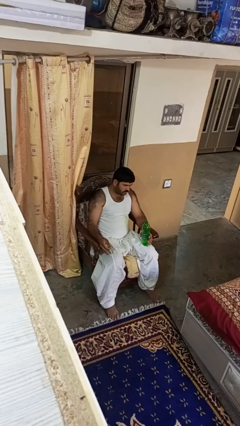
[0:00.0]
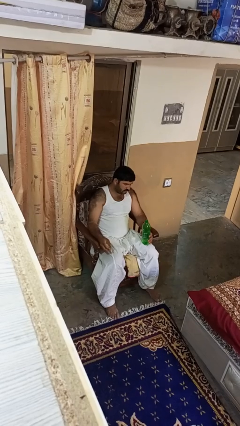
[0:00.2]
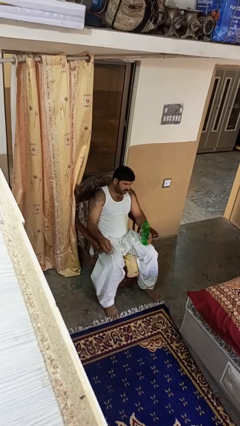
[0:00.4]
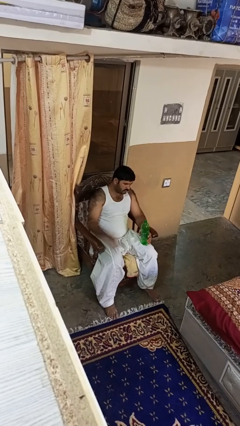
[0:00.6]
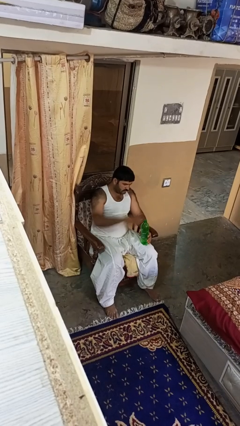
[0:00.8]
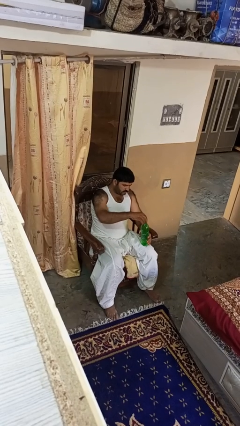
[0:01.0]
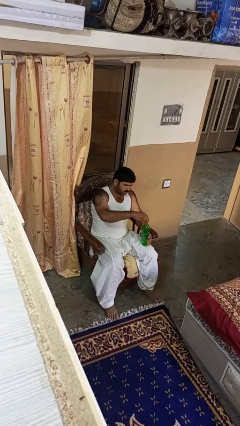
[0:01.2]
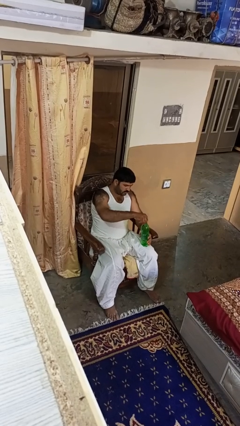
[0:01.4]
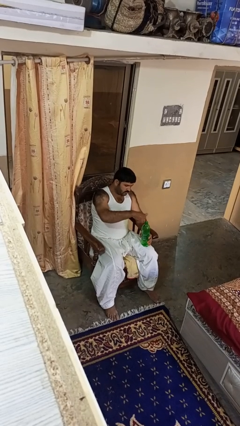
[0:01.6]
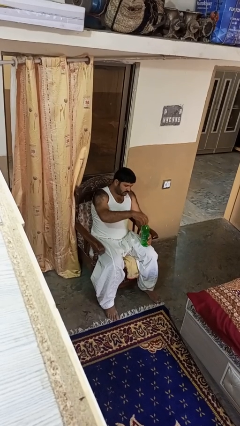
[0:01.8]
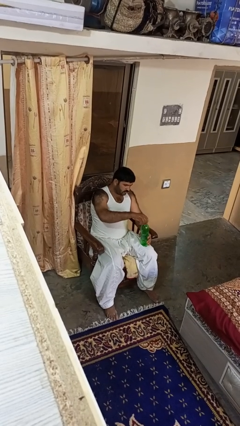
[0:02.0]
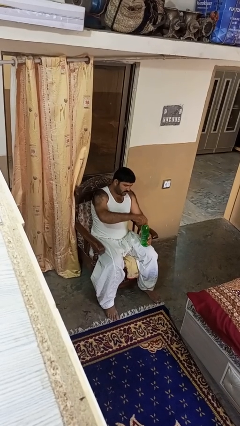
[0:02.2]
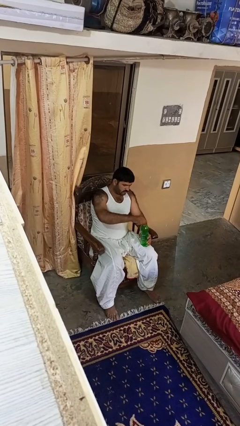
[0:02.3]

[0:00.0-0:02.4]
person screws lid to bottle

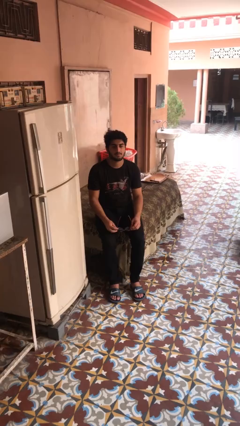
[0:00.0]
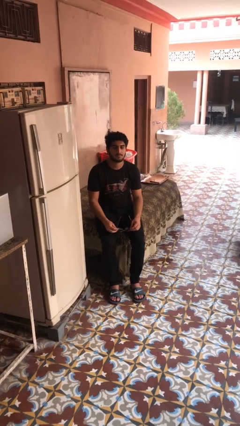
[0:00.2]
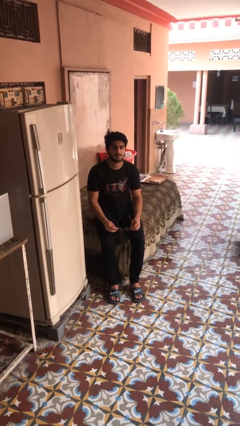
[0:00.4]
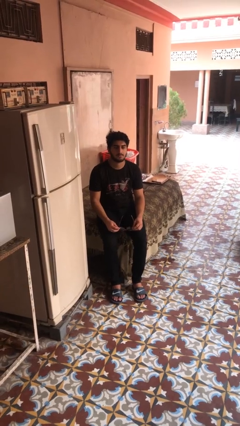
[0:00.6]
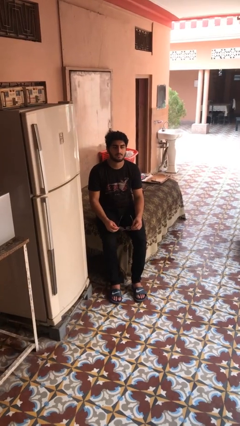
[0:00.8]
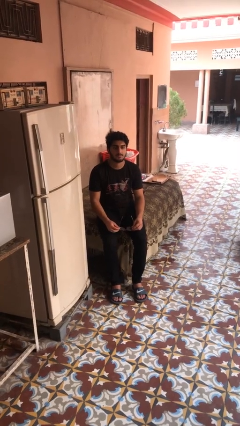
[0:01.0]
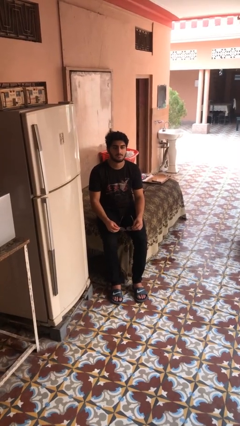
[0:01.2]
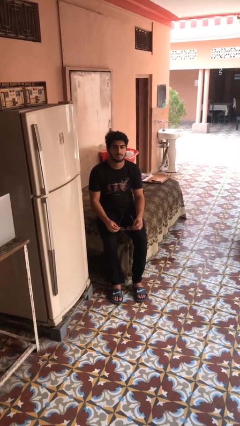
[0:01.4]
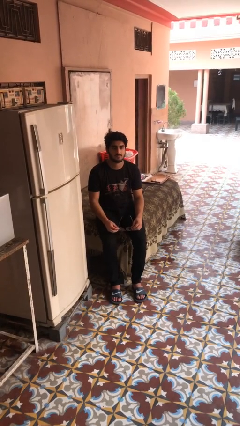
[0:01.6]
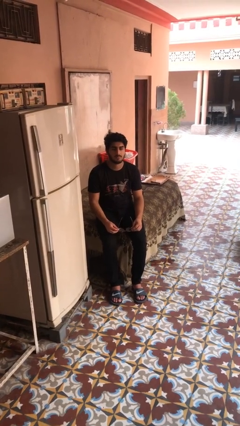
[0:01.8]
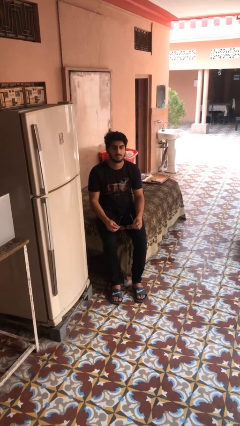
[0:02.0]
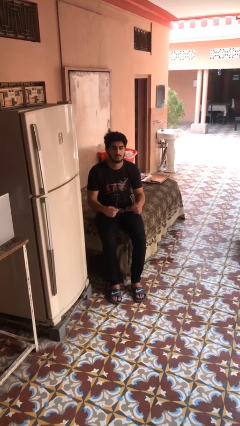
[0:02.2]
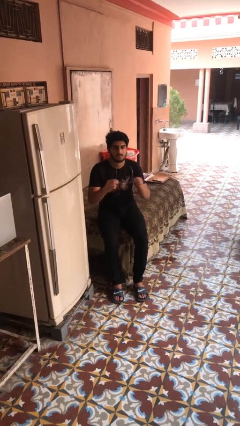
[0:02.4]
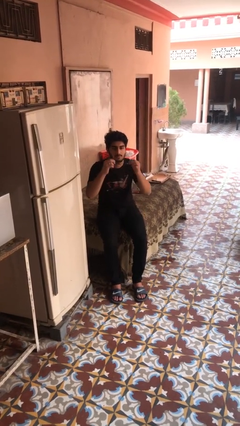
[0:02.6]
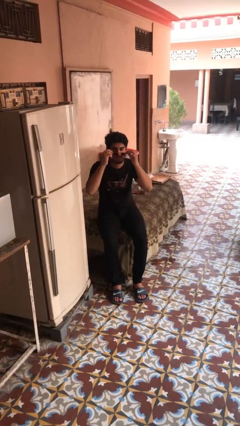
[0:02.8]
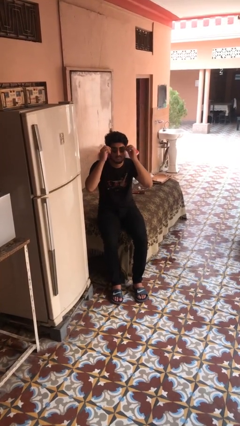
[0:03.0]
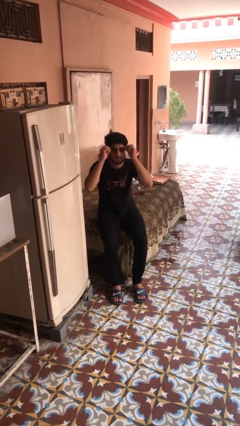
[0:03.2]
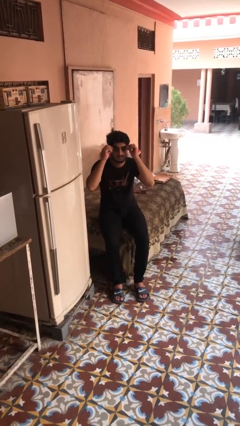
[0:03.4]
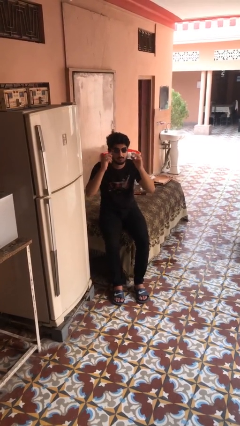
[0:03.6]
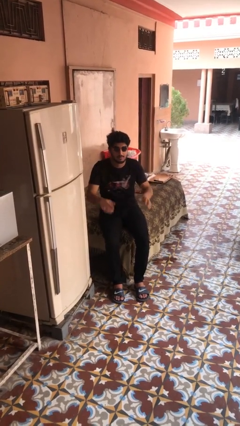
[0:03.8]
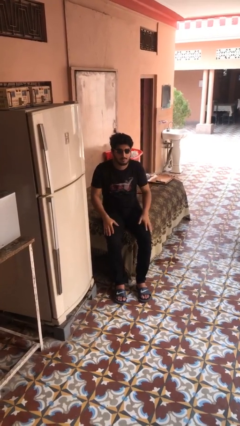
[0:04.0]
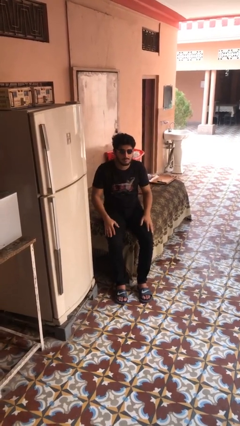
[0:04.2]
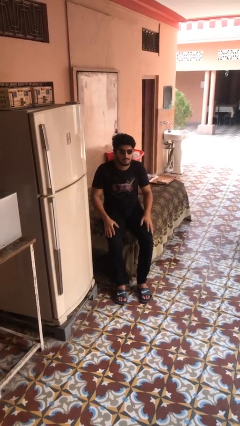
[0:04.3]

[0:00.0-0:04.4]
person puts on sunglasses

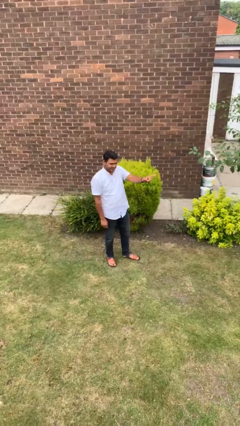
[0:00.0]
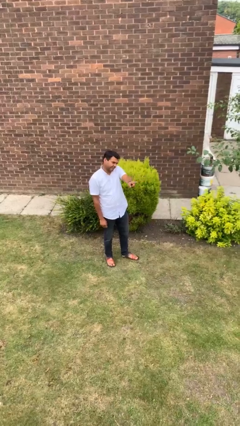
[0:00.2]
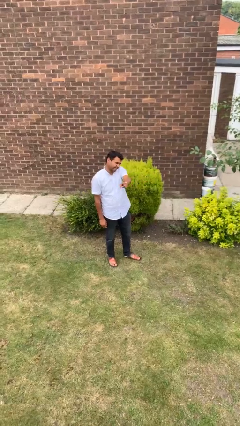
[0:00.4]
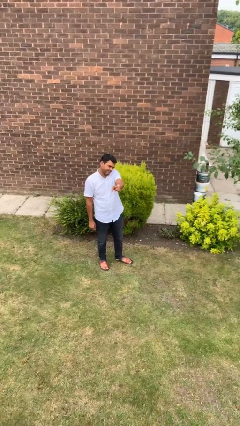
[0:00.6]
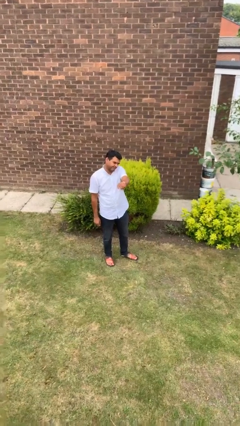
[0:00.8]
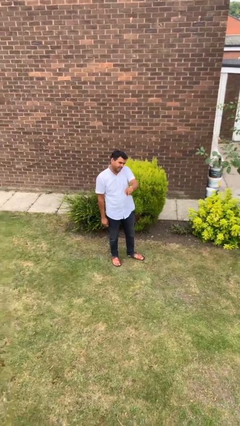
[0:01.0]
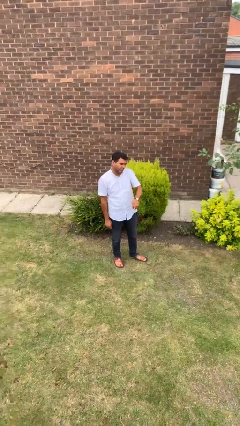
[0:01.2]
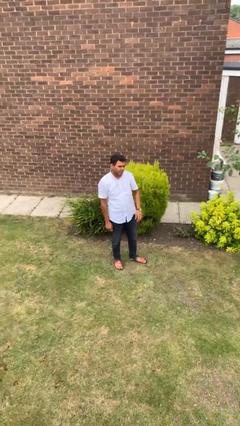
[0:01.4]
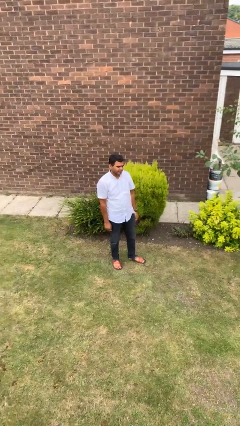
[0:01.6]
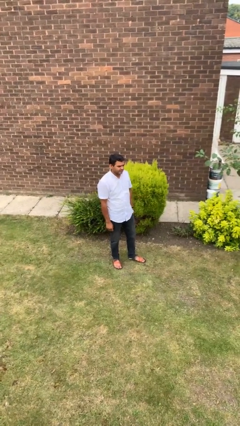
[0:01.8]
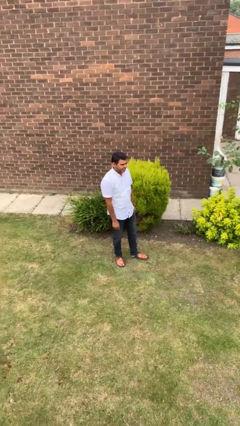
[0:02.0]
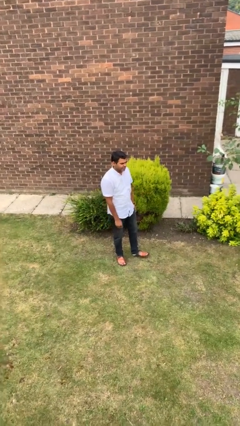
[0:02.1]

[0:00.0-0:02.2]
person gestures swipe right

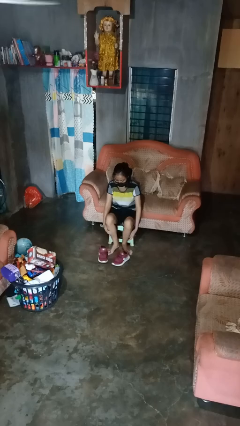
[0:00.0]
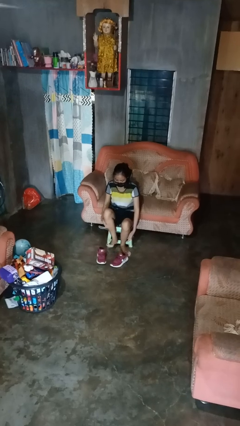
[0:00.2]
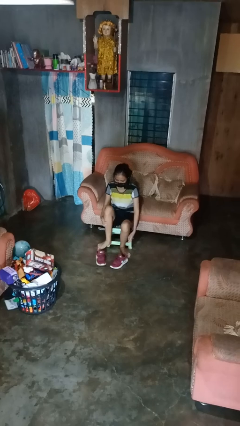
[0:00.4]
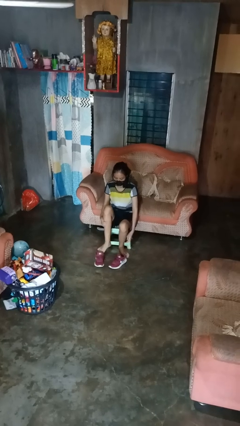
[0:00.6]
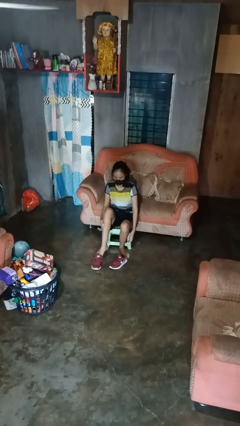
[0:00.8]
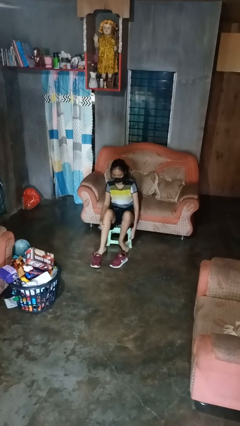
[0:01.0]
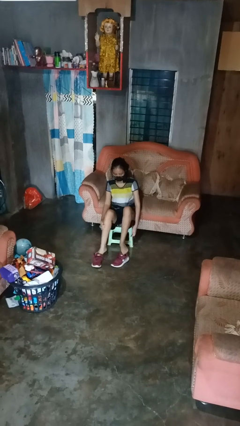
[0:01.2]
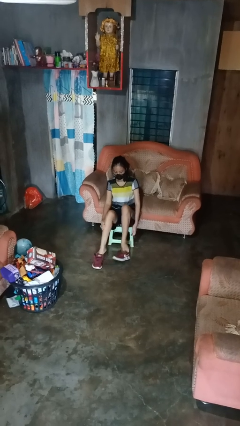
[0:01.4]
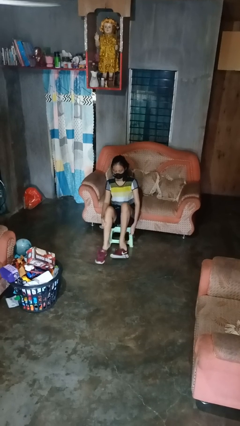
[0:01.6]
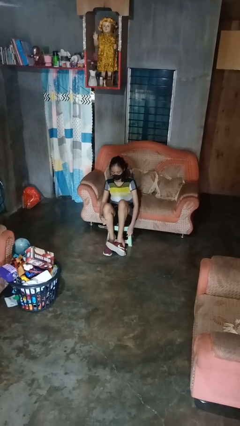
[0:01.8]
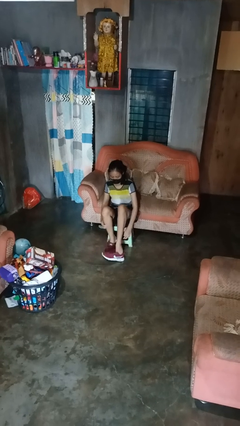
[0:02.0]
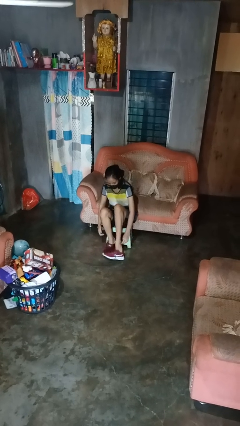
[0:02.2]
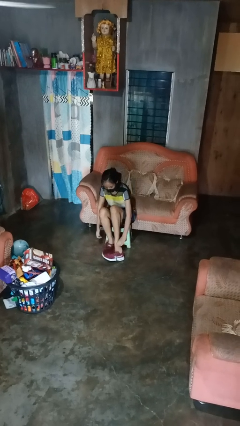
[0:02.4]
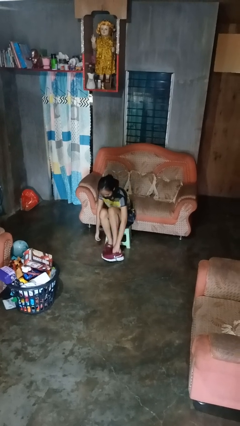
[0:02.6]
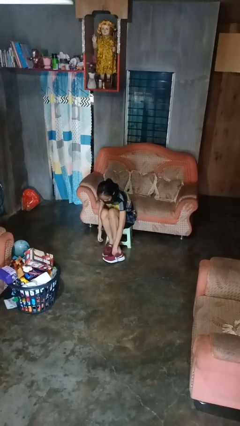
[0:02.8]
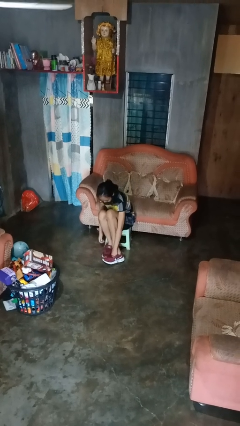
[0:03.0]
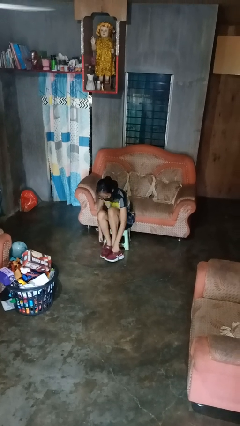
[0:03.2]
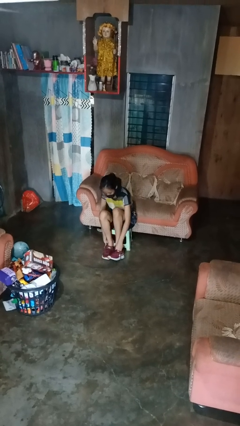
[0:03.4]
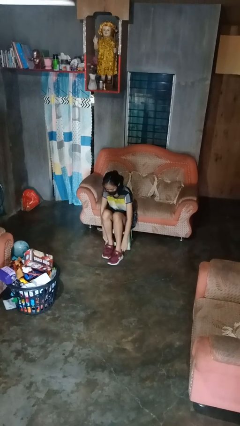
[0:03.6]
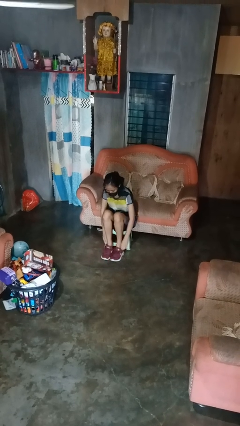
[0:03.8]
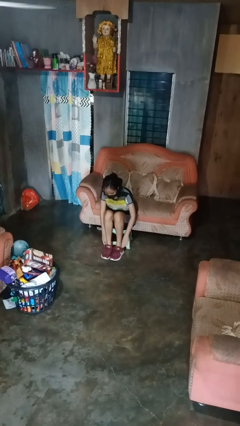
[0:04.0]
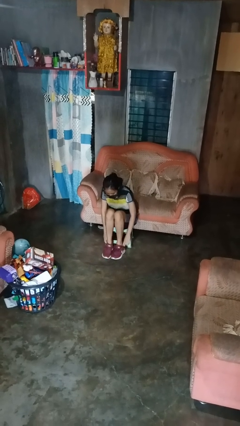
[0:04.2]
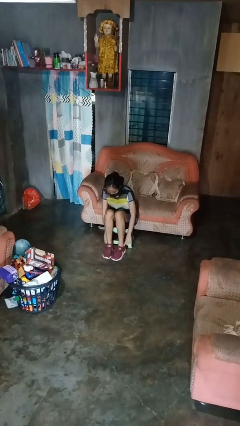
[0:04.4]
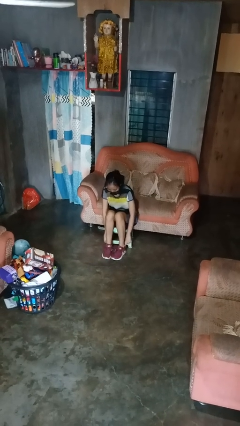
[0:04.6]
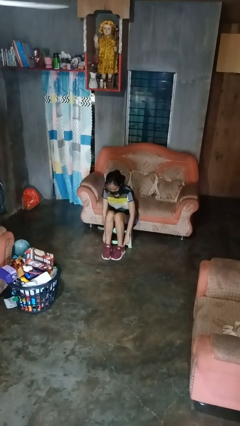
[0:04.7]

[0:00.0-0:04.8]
person puts on shoes

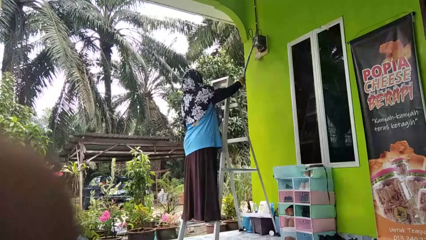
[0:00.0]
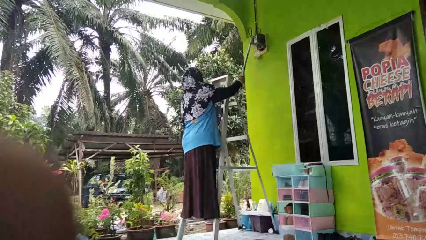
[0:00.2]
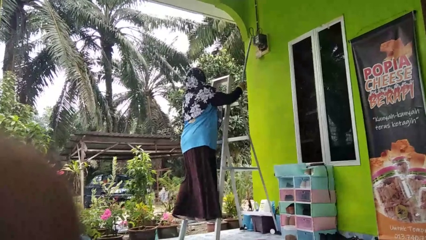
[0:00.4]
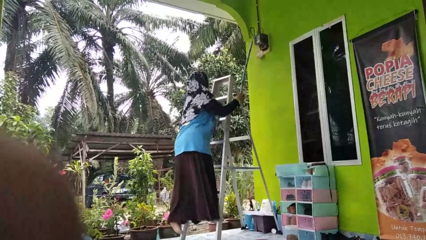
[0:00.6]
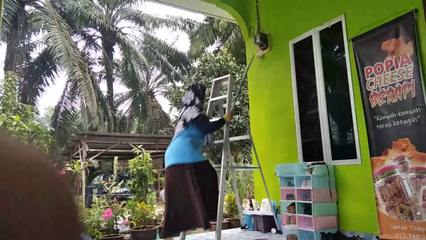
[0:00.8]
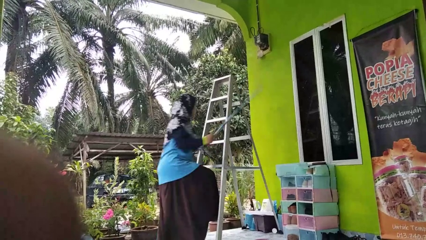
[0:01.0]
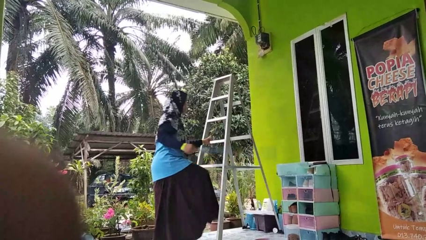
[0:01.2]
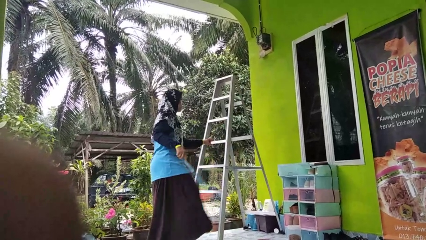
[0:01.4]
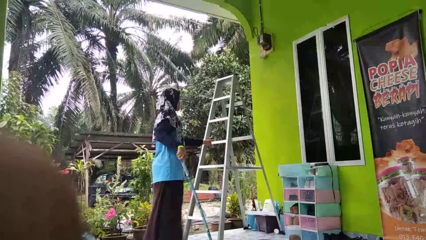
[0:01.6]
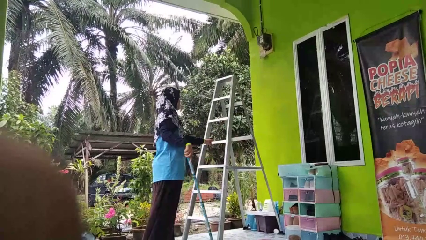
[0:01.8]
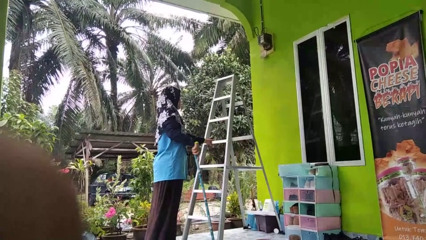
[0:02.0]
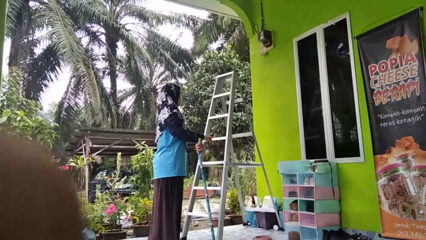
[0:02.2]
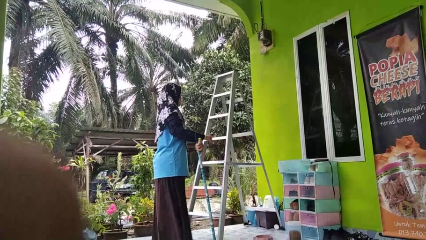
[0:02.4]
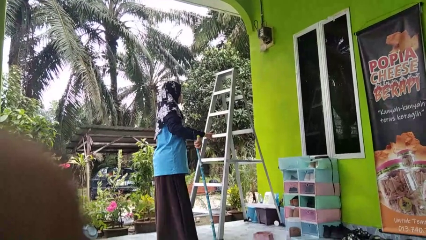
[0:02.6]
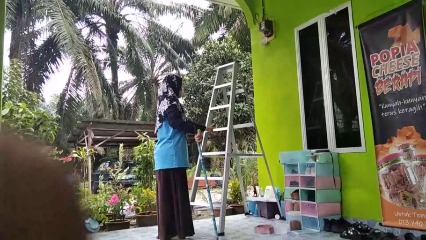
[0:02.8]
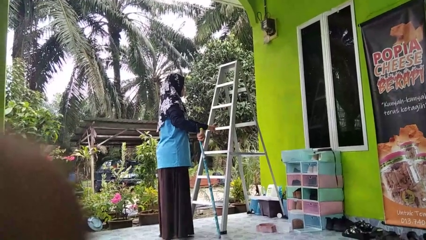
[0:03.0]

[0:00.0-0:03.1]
person climbs down ladder

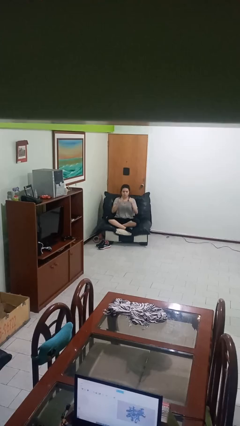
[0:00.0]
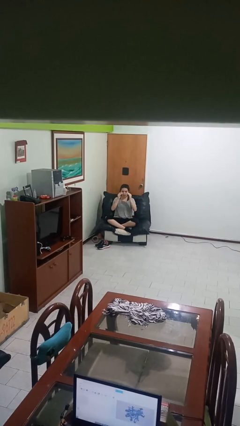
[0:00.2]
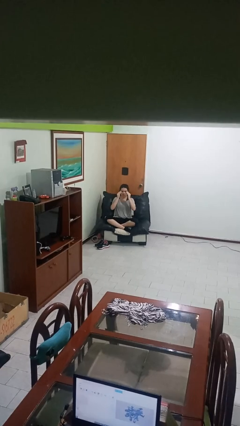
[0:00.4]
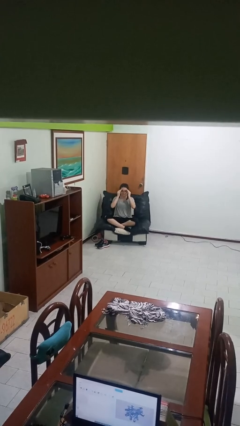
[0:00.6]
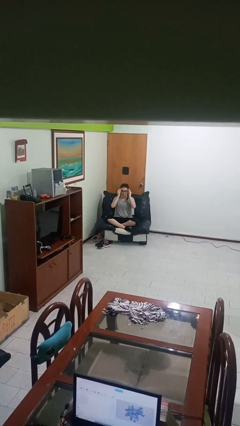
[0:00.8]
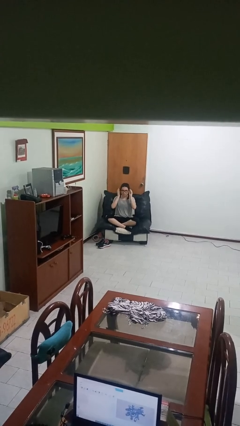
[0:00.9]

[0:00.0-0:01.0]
person puts on glasses
